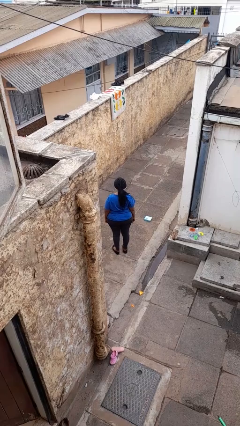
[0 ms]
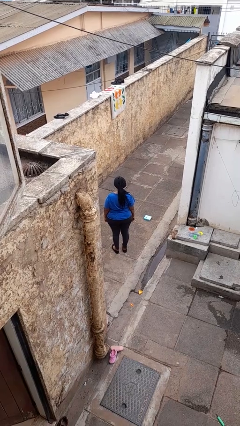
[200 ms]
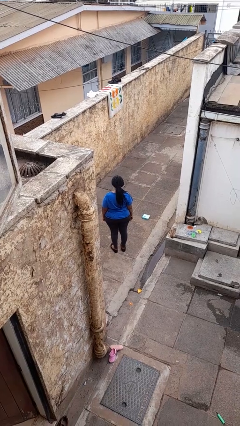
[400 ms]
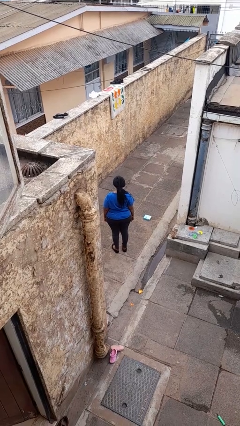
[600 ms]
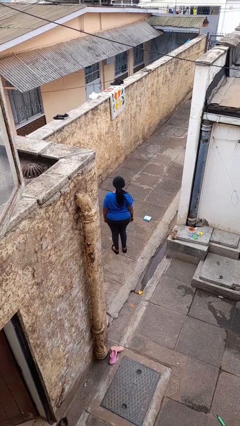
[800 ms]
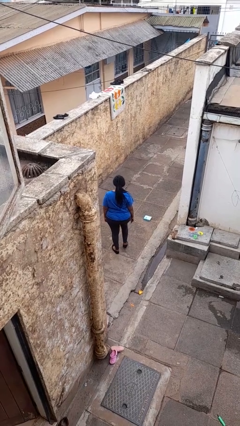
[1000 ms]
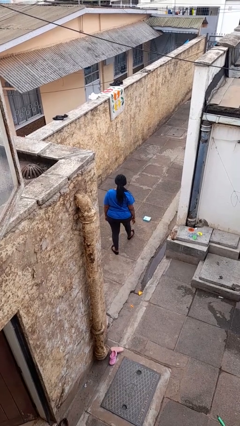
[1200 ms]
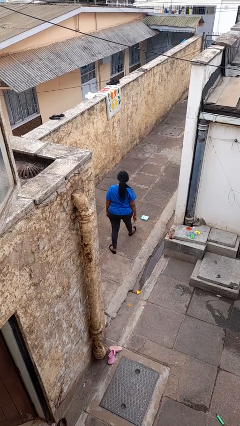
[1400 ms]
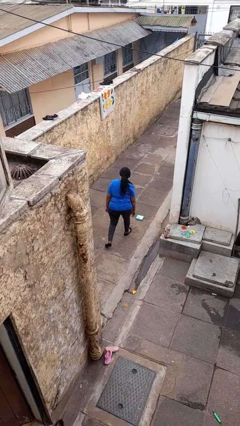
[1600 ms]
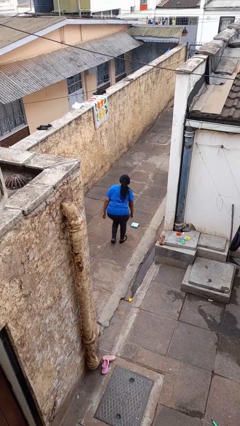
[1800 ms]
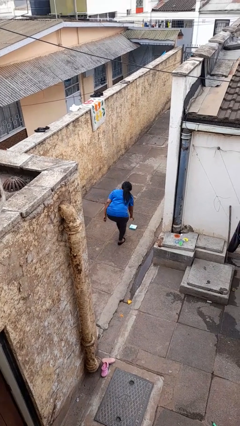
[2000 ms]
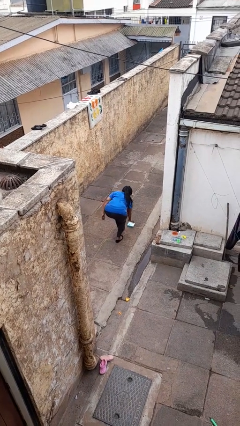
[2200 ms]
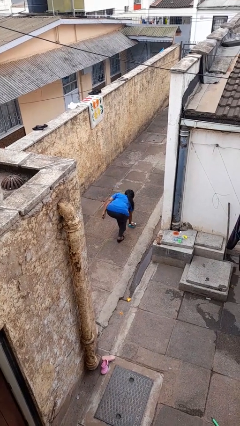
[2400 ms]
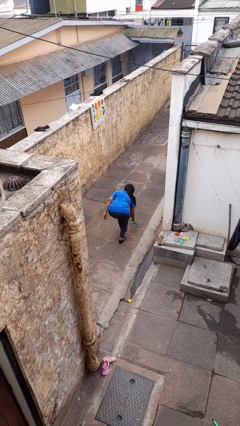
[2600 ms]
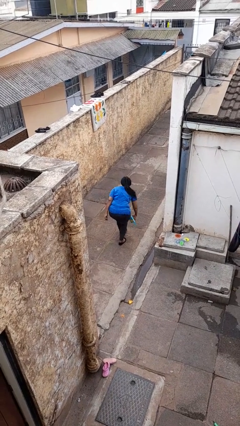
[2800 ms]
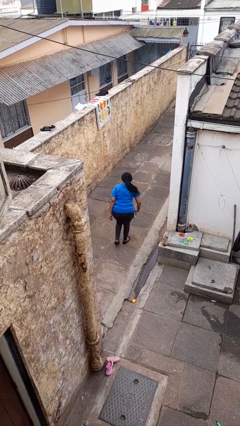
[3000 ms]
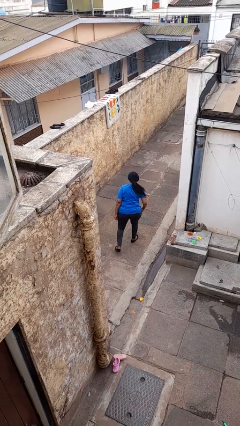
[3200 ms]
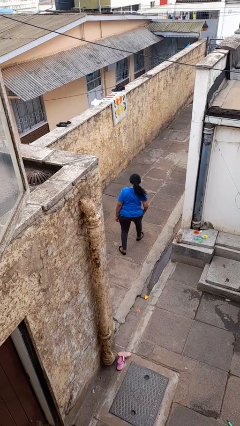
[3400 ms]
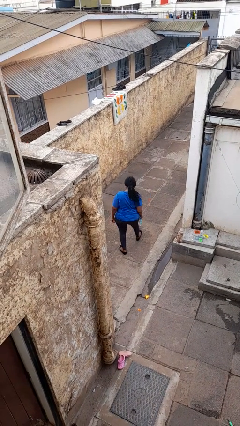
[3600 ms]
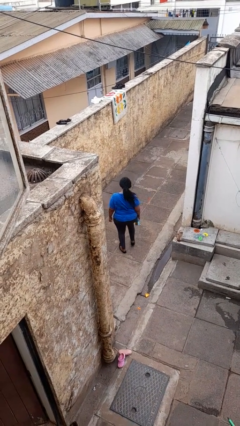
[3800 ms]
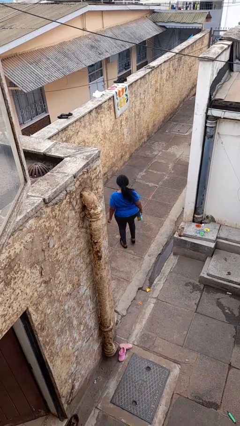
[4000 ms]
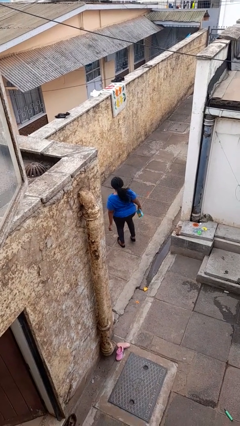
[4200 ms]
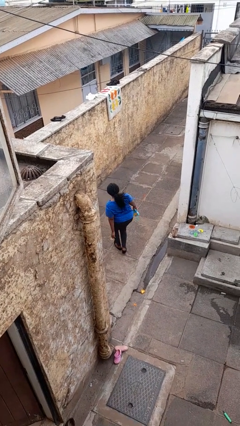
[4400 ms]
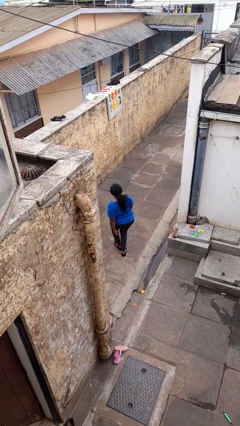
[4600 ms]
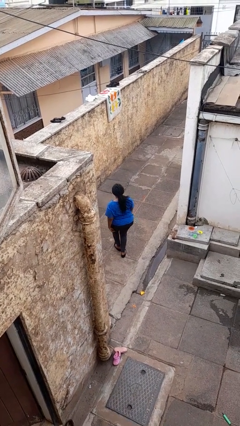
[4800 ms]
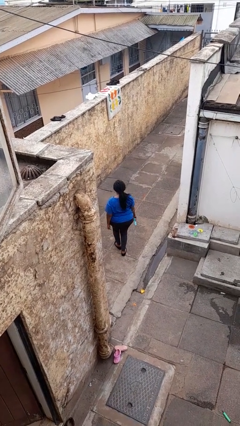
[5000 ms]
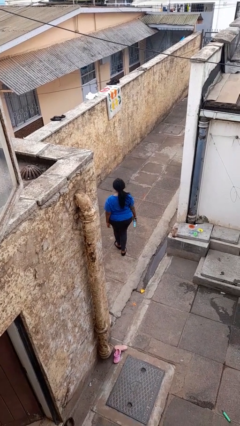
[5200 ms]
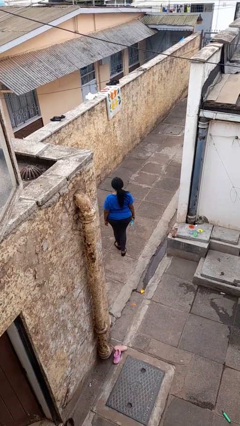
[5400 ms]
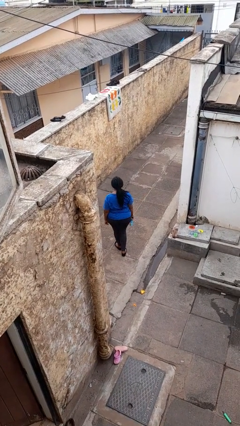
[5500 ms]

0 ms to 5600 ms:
person picks up object from floor

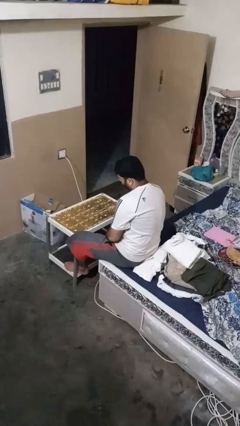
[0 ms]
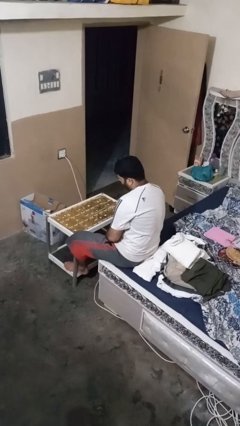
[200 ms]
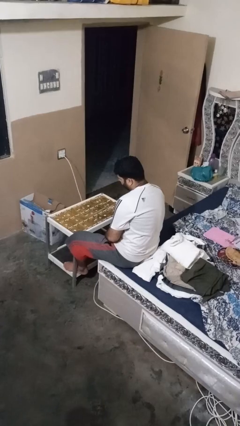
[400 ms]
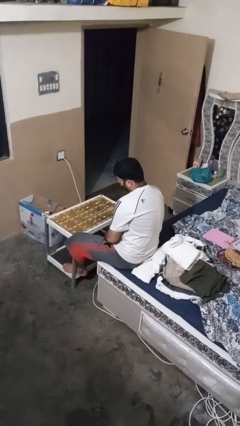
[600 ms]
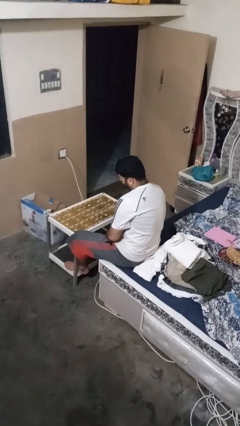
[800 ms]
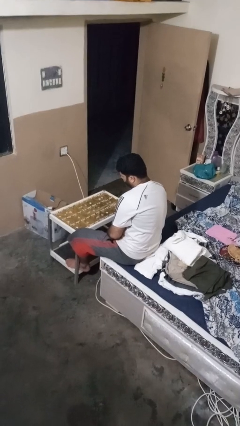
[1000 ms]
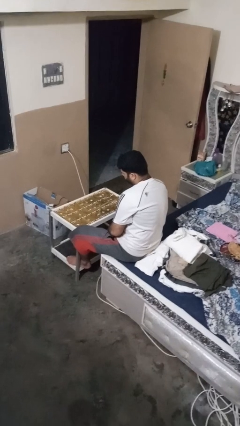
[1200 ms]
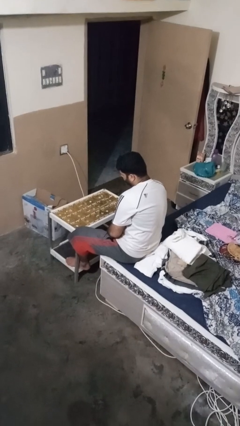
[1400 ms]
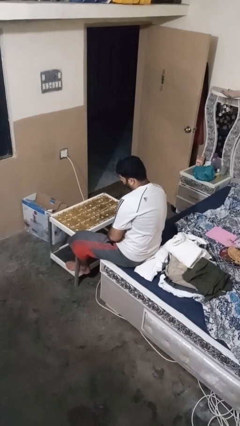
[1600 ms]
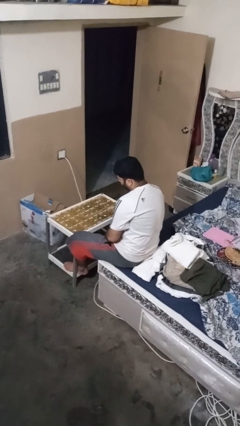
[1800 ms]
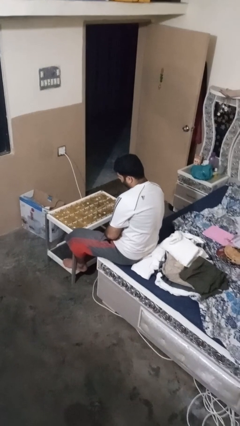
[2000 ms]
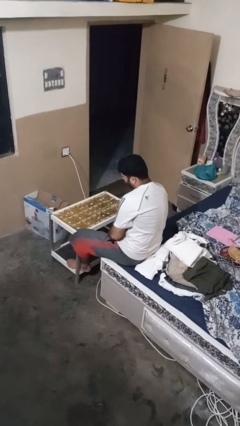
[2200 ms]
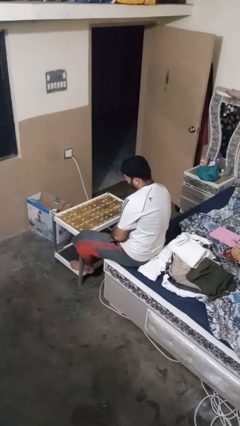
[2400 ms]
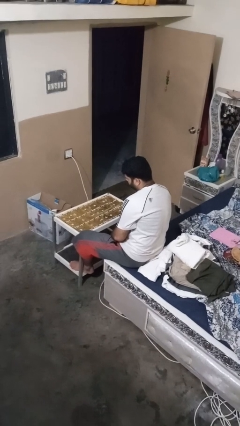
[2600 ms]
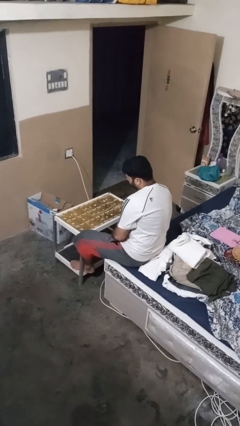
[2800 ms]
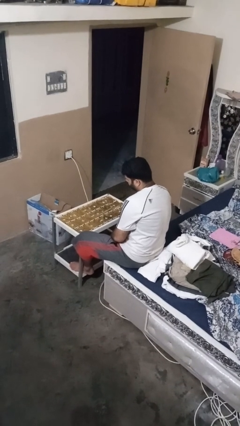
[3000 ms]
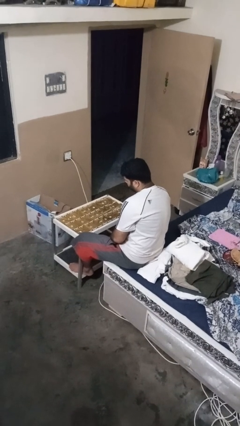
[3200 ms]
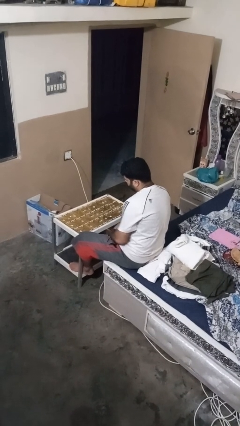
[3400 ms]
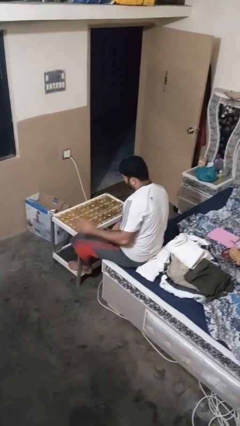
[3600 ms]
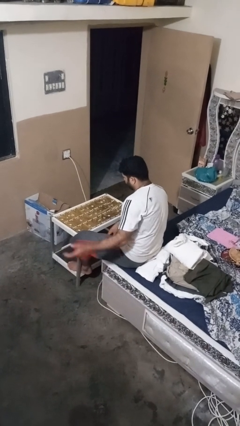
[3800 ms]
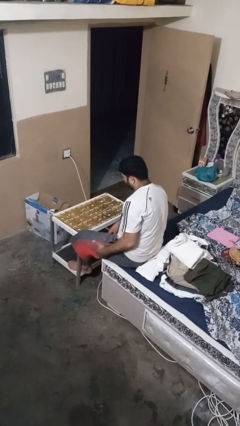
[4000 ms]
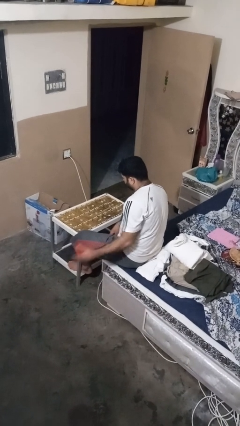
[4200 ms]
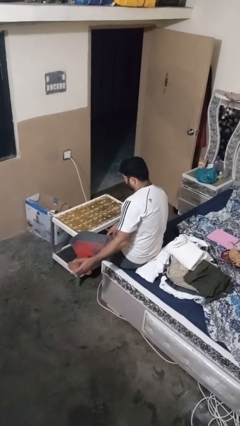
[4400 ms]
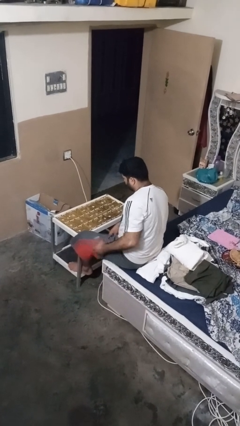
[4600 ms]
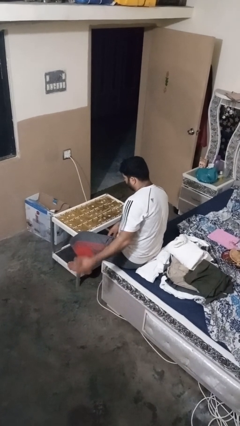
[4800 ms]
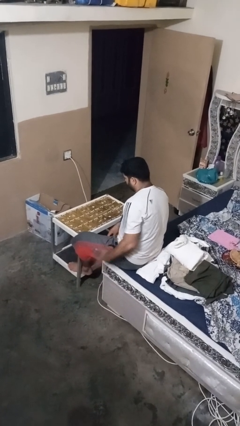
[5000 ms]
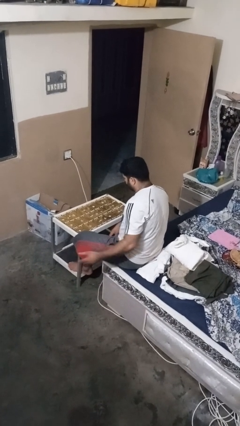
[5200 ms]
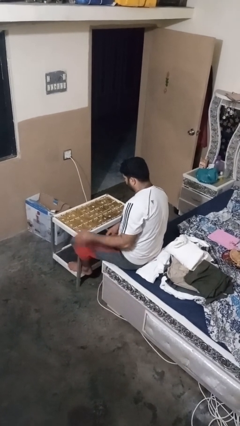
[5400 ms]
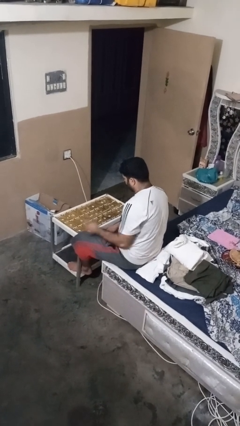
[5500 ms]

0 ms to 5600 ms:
person slaps hands on thighs

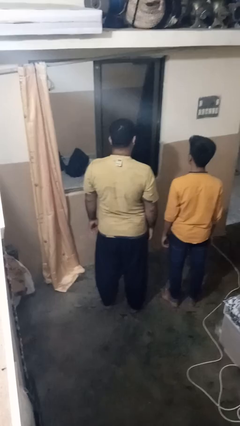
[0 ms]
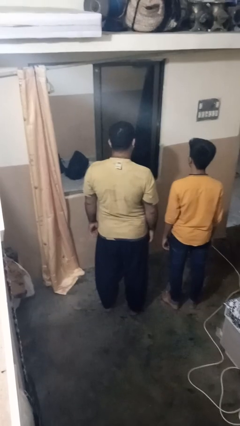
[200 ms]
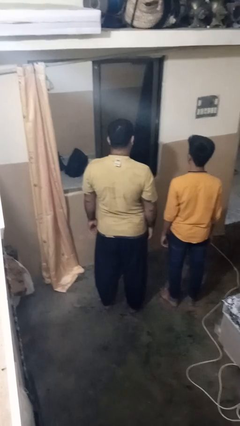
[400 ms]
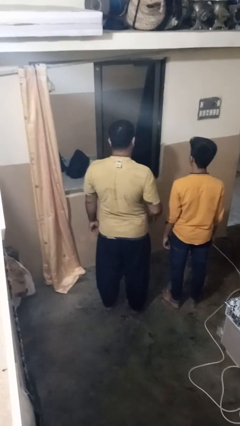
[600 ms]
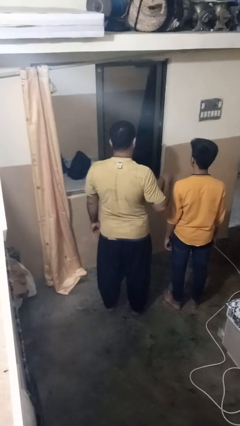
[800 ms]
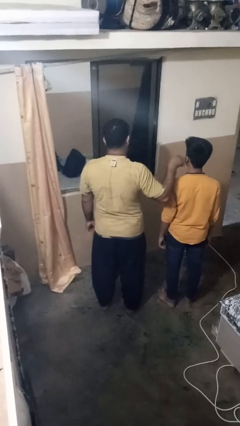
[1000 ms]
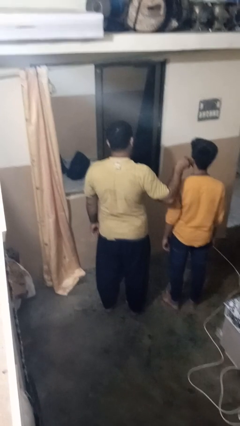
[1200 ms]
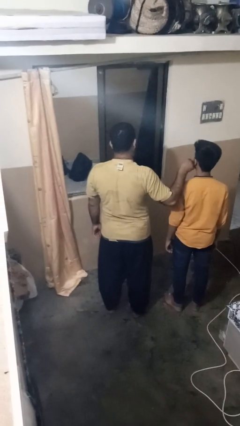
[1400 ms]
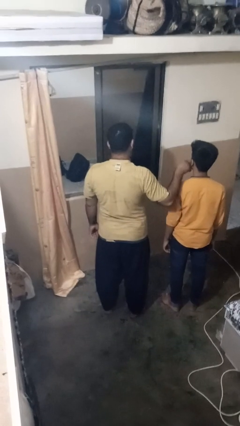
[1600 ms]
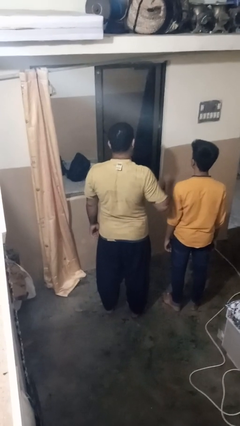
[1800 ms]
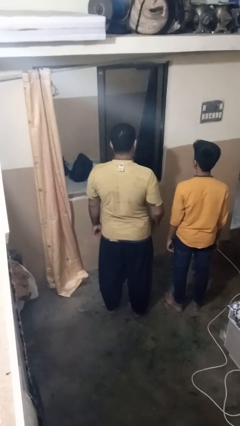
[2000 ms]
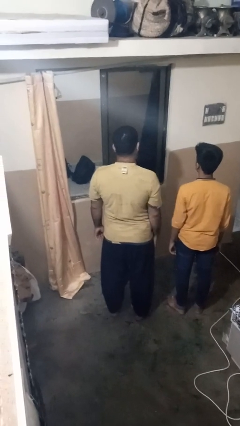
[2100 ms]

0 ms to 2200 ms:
person touches face of person

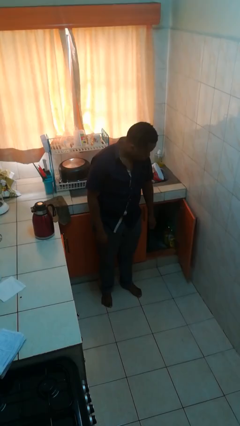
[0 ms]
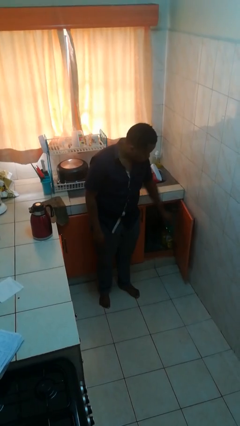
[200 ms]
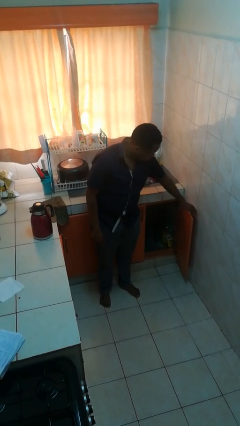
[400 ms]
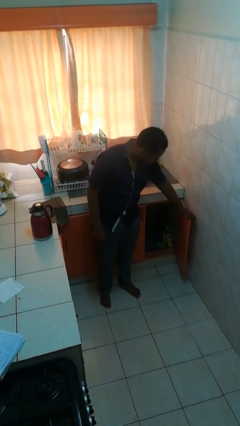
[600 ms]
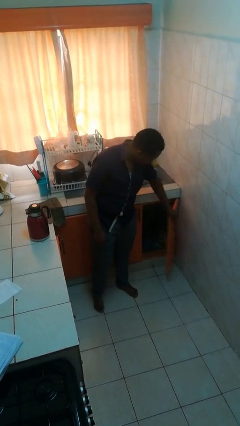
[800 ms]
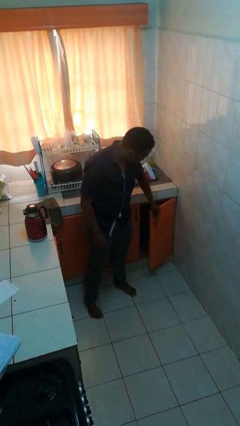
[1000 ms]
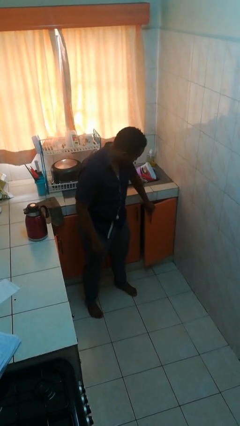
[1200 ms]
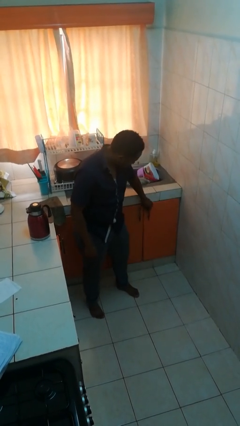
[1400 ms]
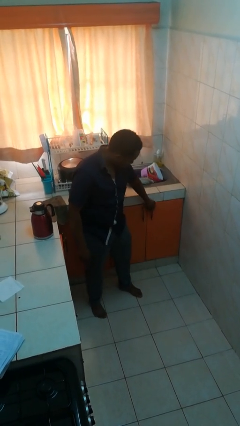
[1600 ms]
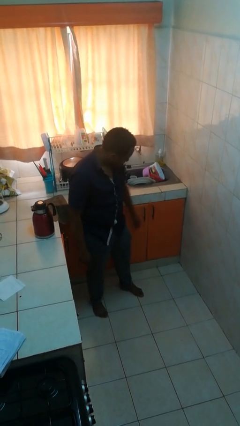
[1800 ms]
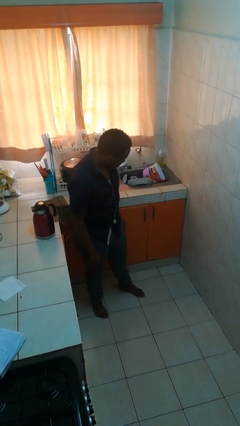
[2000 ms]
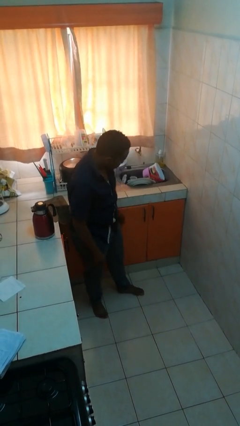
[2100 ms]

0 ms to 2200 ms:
person closes cabinet

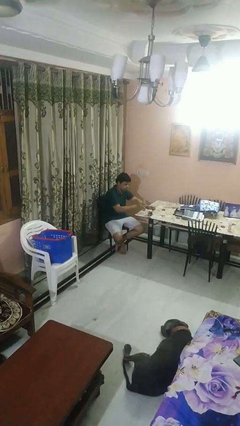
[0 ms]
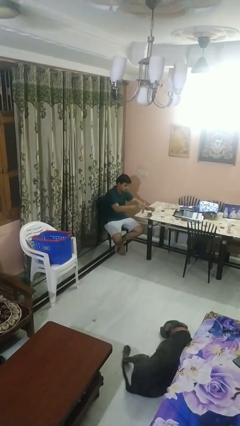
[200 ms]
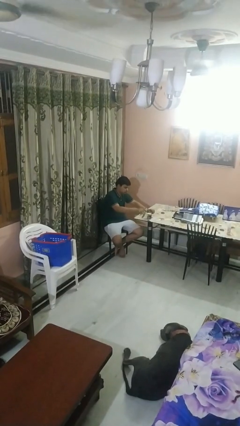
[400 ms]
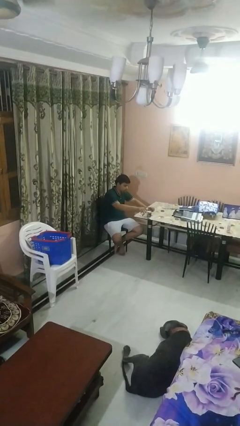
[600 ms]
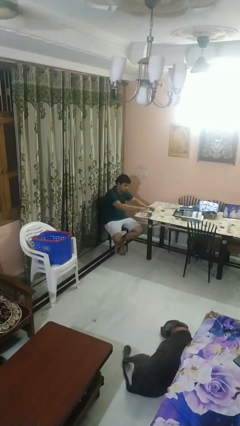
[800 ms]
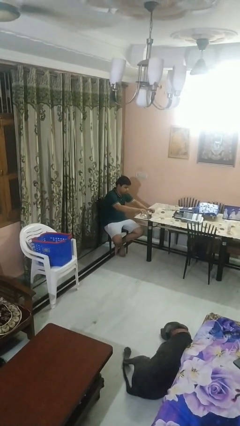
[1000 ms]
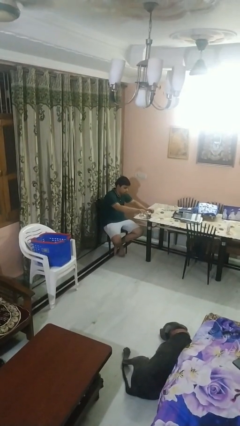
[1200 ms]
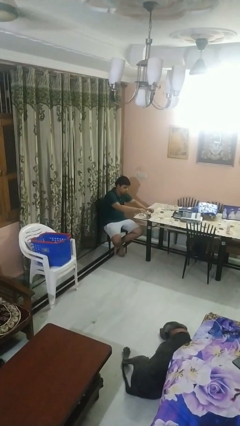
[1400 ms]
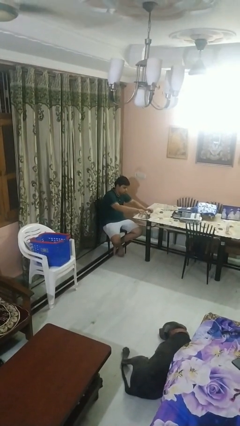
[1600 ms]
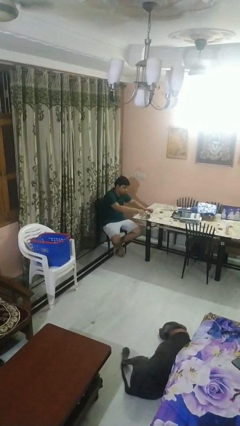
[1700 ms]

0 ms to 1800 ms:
person pours liquid into cup

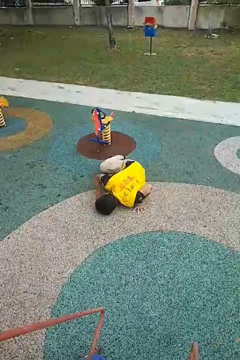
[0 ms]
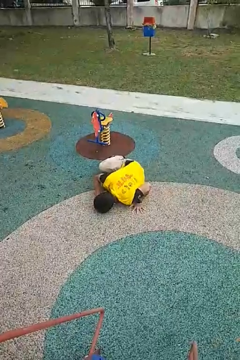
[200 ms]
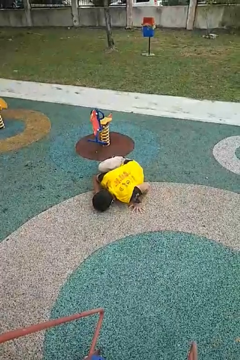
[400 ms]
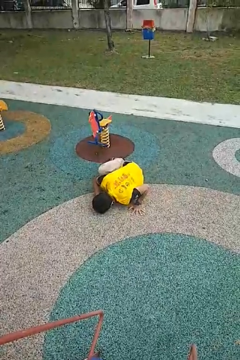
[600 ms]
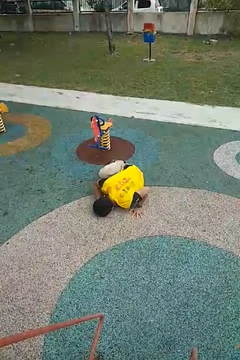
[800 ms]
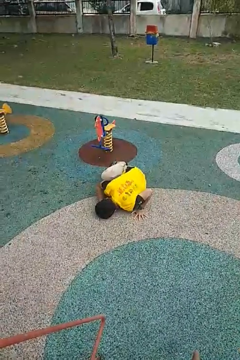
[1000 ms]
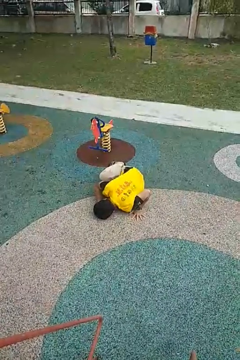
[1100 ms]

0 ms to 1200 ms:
person lies down on floor
